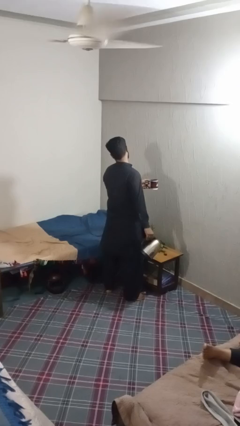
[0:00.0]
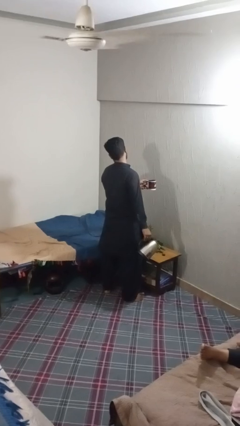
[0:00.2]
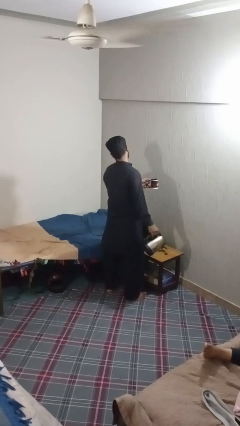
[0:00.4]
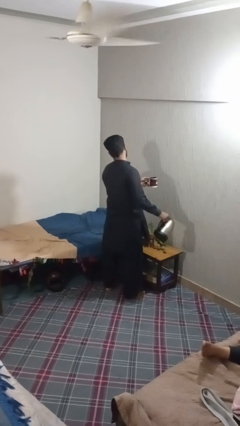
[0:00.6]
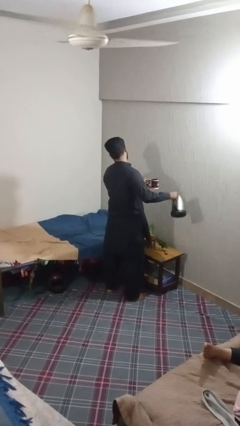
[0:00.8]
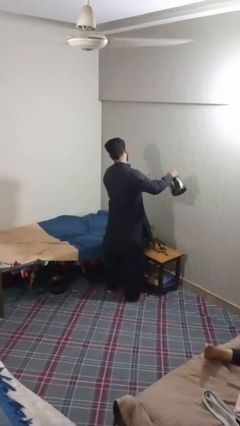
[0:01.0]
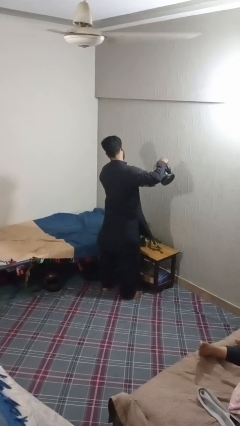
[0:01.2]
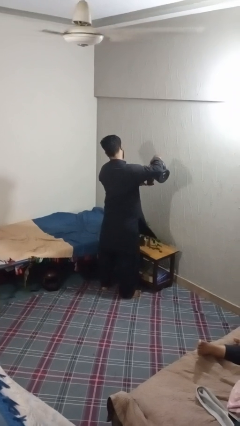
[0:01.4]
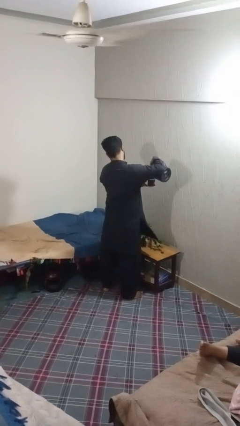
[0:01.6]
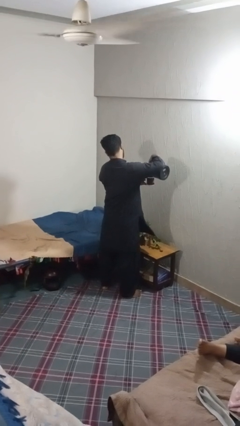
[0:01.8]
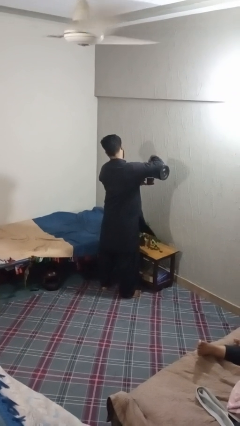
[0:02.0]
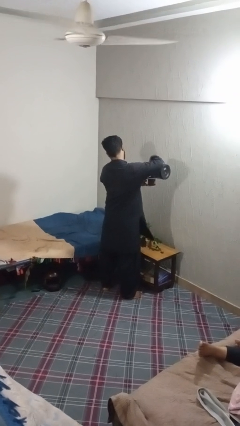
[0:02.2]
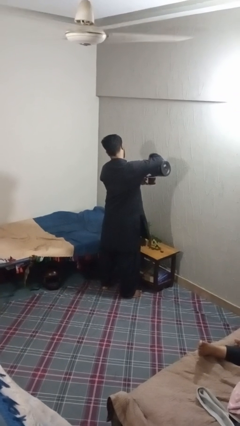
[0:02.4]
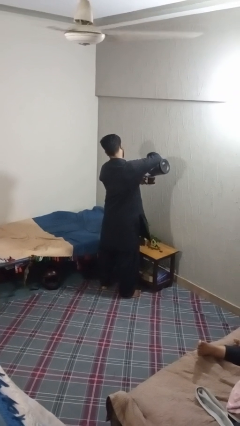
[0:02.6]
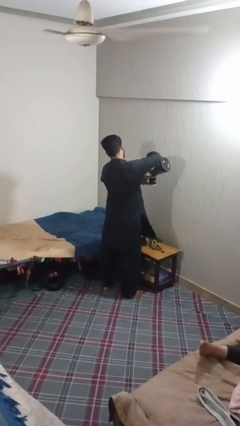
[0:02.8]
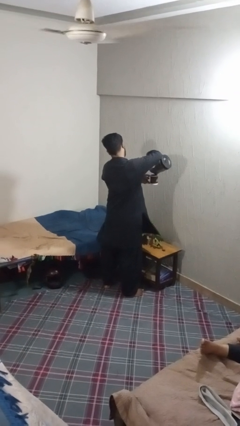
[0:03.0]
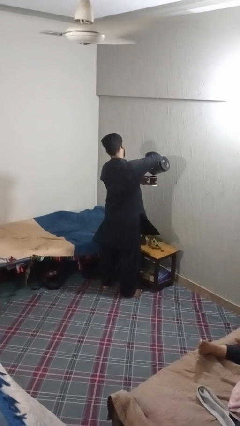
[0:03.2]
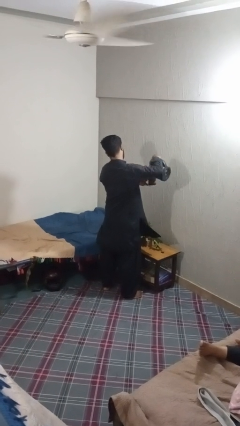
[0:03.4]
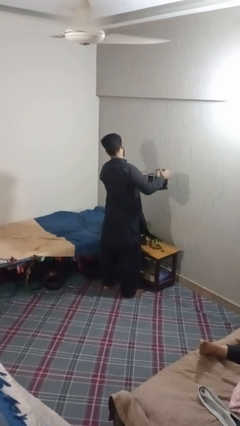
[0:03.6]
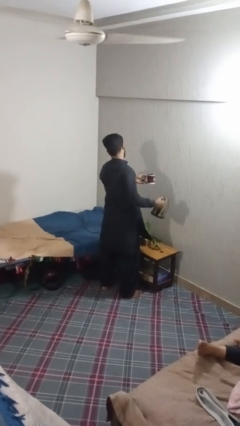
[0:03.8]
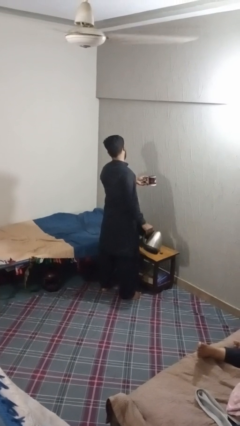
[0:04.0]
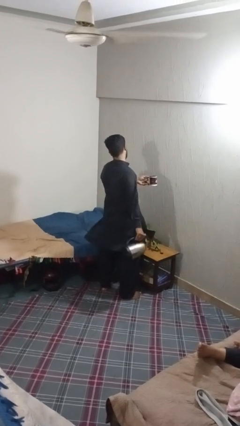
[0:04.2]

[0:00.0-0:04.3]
person pours coffee into mug

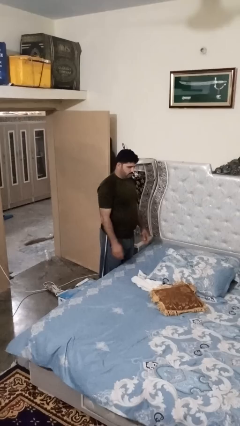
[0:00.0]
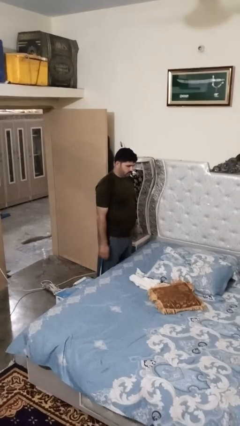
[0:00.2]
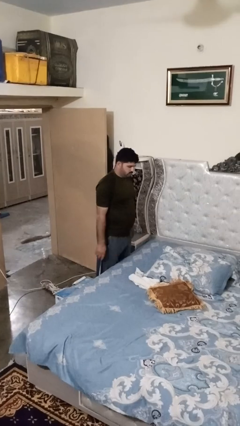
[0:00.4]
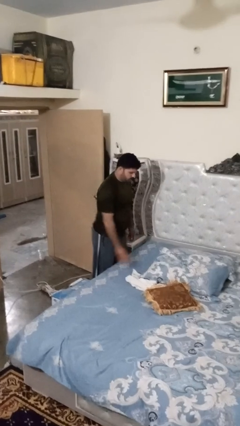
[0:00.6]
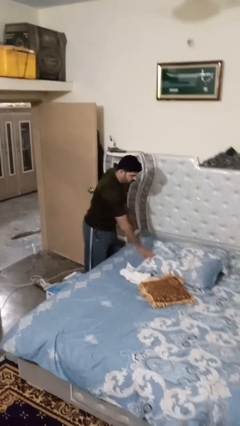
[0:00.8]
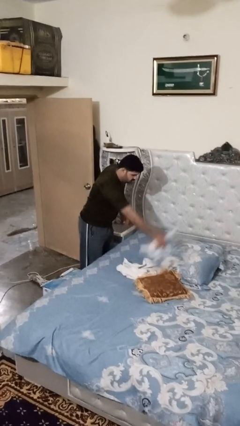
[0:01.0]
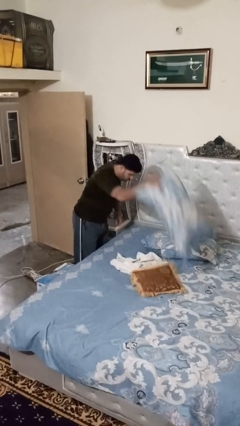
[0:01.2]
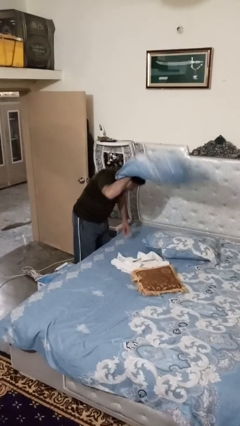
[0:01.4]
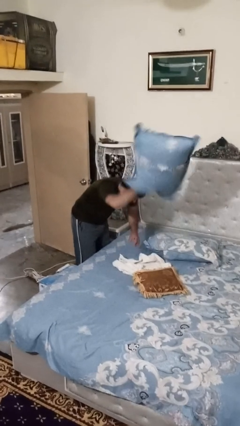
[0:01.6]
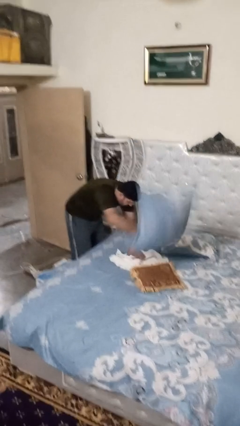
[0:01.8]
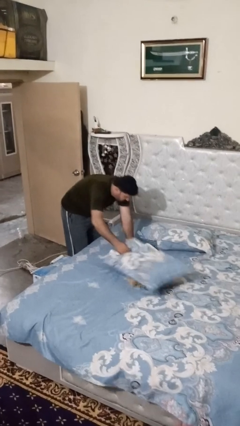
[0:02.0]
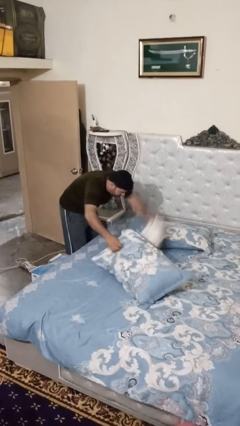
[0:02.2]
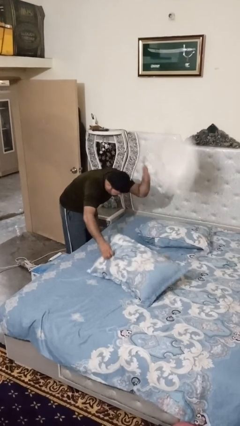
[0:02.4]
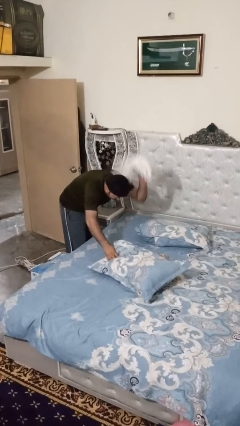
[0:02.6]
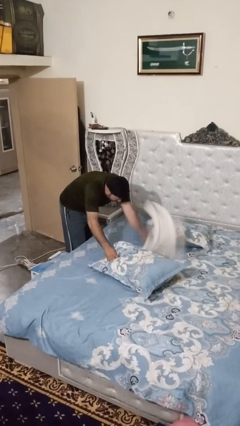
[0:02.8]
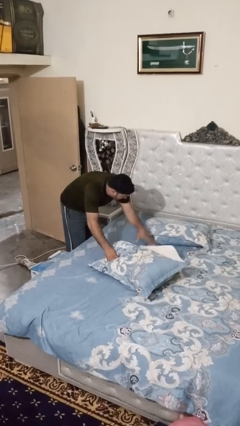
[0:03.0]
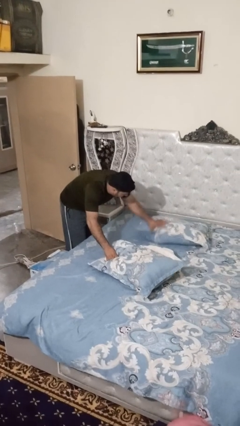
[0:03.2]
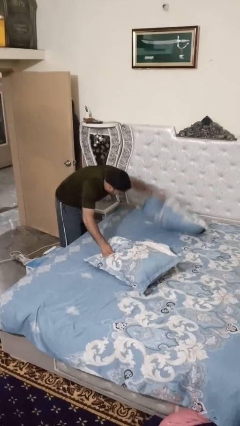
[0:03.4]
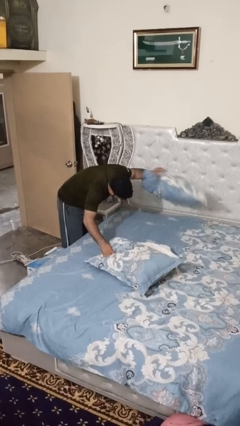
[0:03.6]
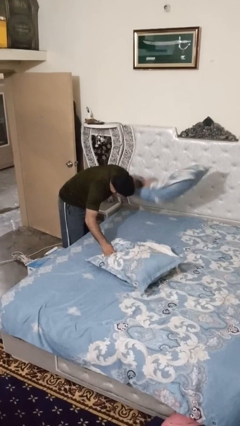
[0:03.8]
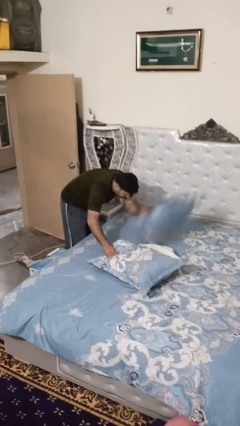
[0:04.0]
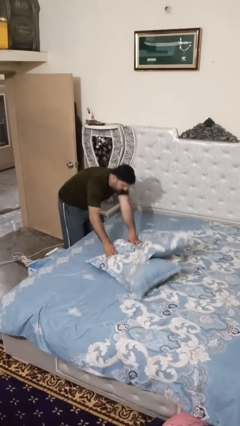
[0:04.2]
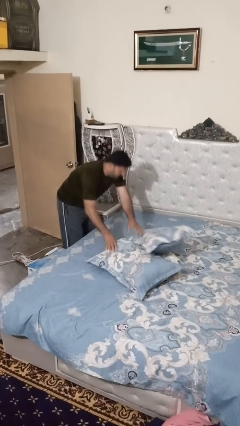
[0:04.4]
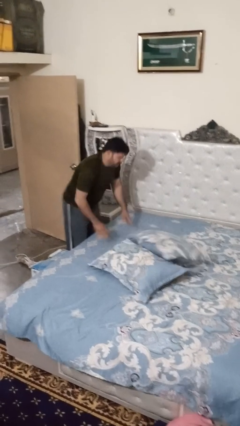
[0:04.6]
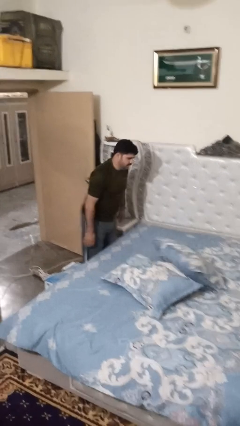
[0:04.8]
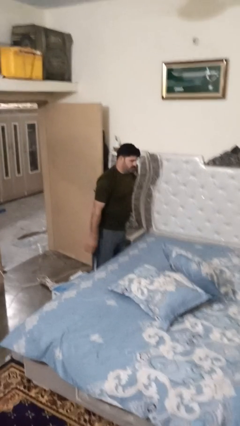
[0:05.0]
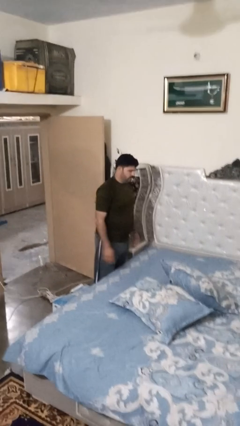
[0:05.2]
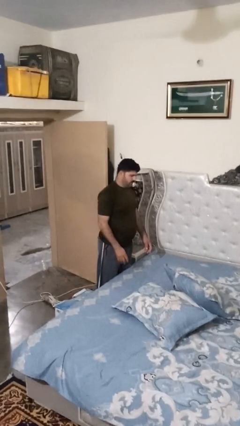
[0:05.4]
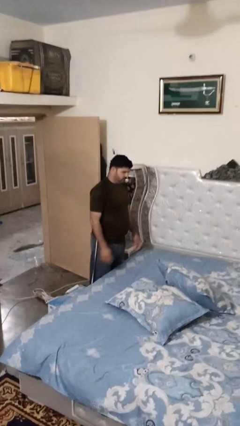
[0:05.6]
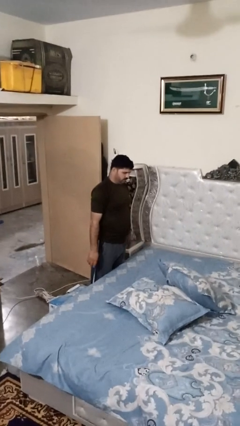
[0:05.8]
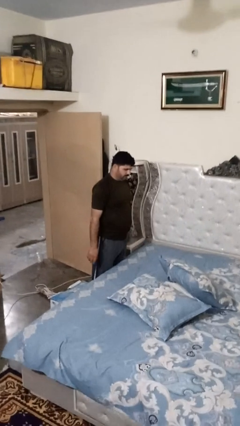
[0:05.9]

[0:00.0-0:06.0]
person searches under bed

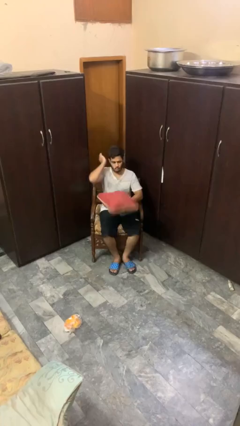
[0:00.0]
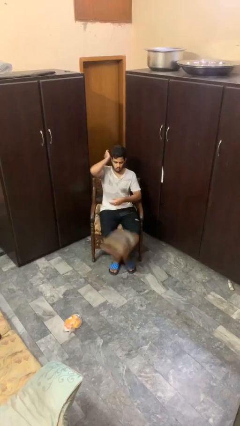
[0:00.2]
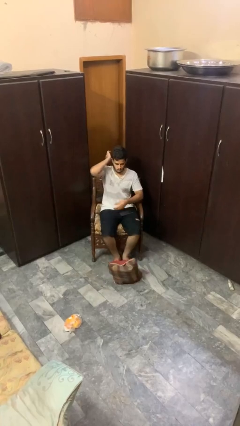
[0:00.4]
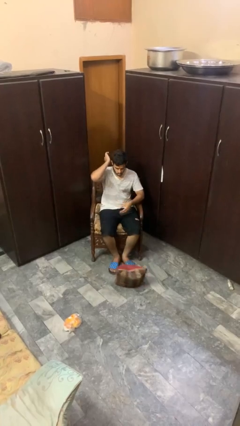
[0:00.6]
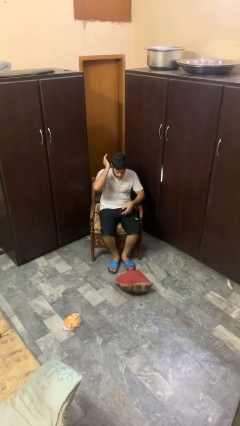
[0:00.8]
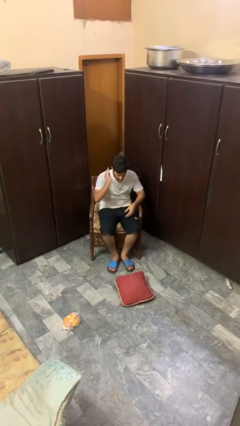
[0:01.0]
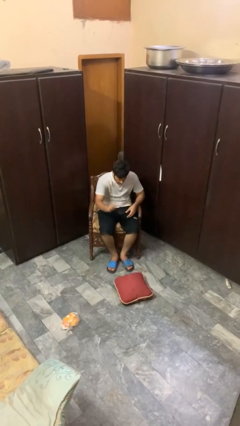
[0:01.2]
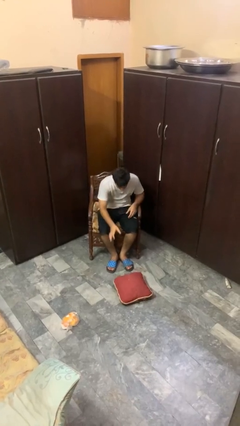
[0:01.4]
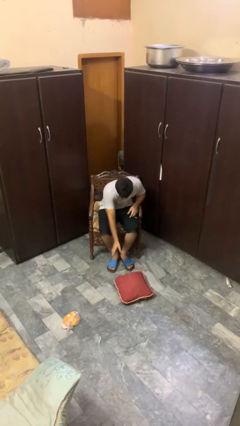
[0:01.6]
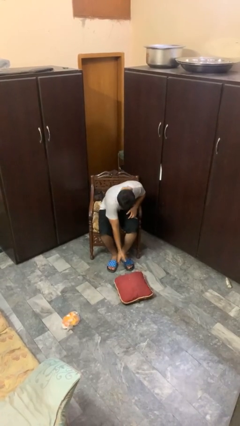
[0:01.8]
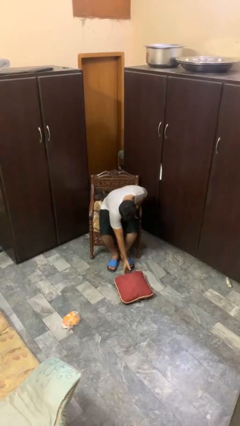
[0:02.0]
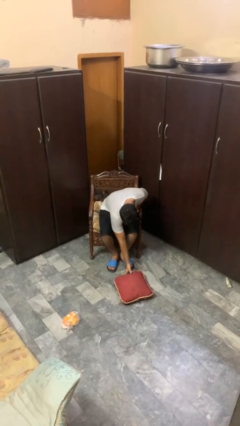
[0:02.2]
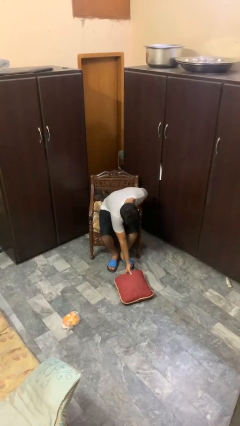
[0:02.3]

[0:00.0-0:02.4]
person drops object

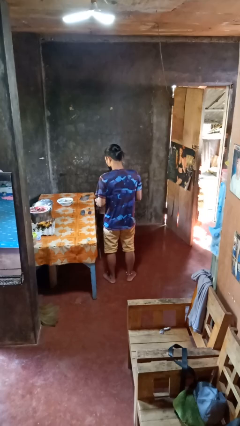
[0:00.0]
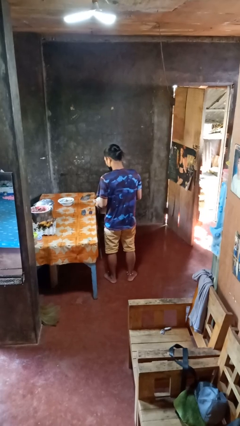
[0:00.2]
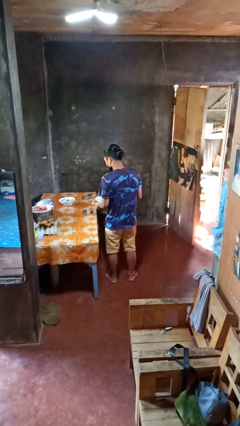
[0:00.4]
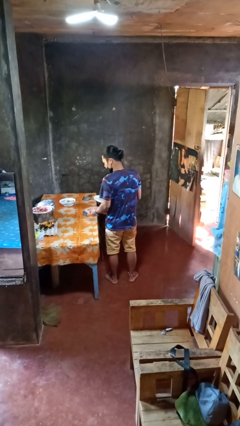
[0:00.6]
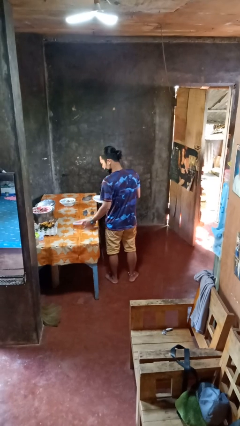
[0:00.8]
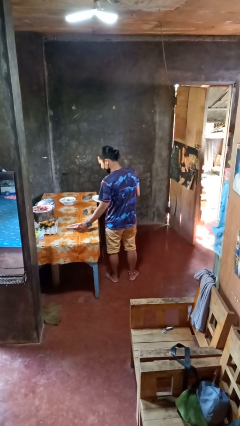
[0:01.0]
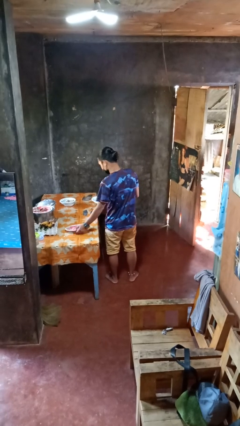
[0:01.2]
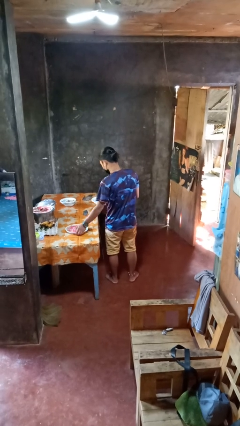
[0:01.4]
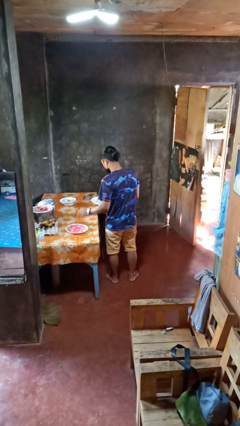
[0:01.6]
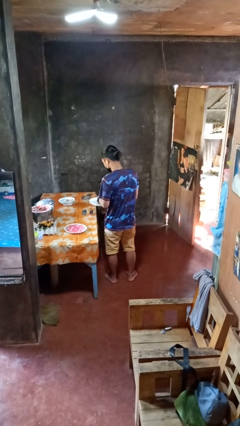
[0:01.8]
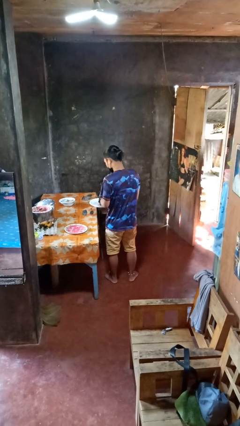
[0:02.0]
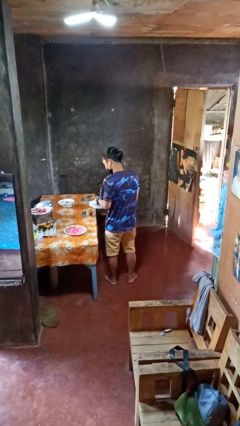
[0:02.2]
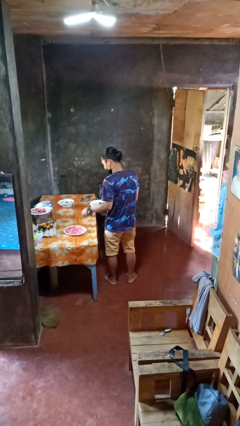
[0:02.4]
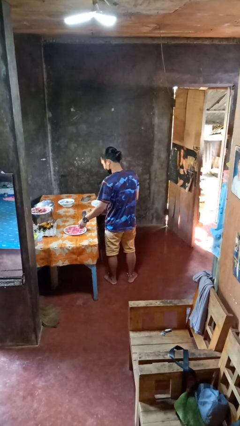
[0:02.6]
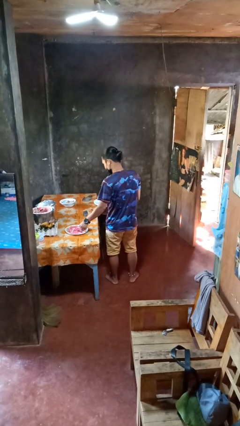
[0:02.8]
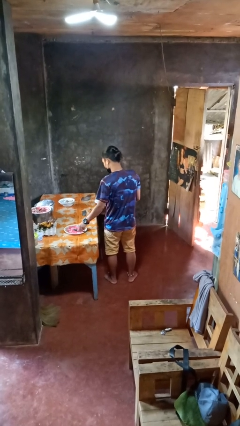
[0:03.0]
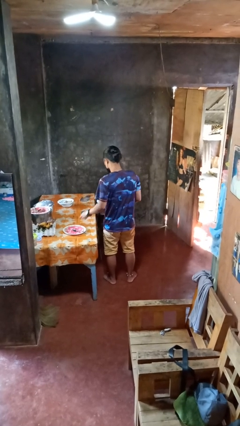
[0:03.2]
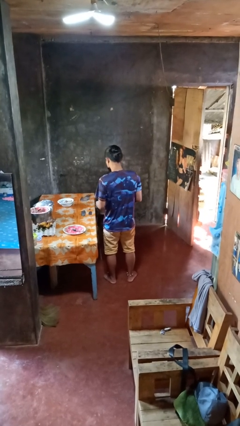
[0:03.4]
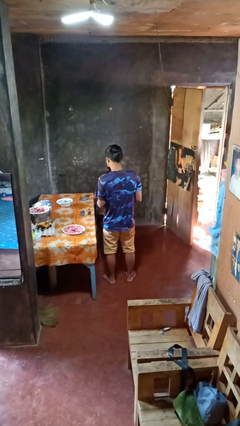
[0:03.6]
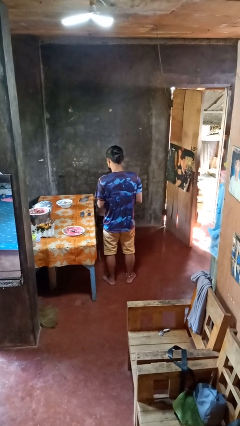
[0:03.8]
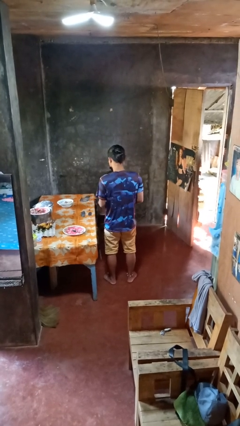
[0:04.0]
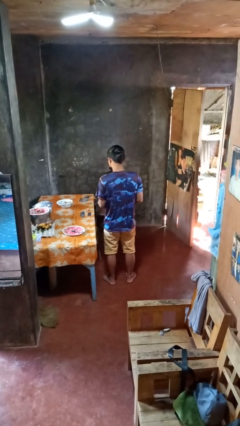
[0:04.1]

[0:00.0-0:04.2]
person sets table

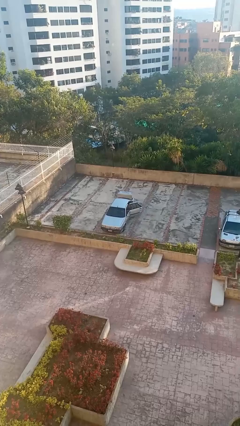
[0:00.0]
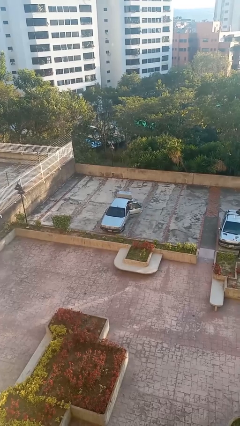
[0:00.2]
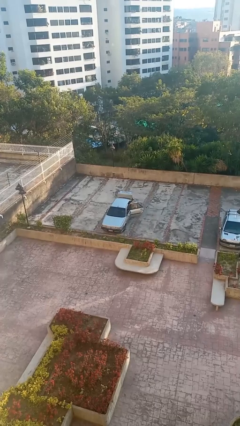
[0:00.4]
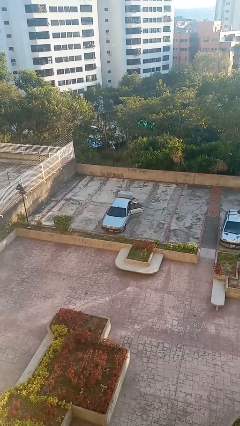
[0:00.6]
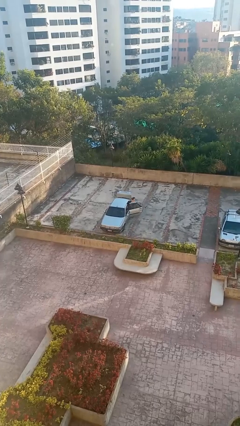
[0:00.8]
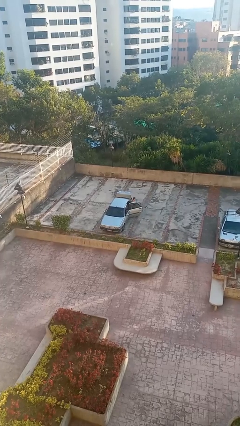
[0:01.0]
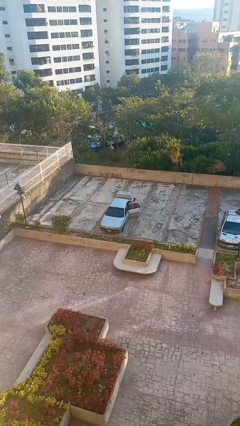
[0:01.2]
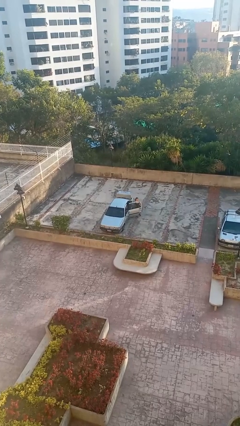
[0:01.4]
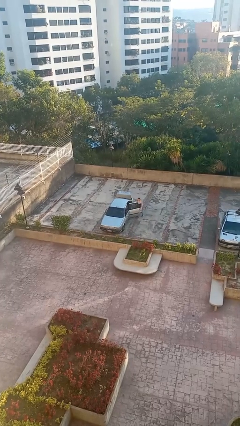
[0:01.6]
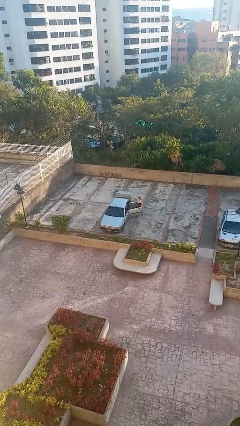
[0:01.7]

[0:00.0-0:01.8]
car drops off person
